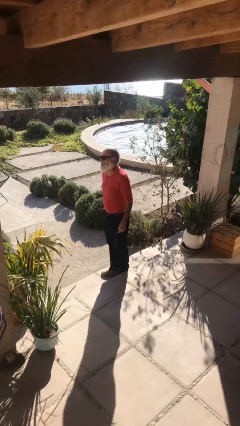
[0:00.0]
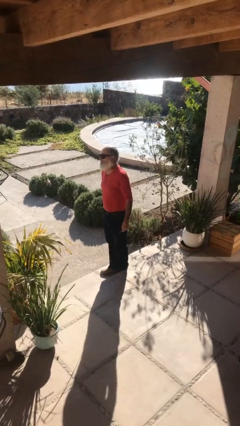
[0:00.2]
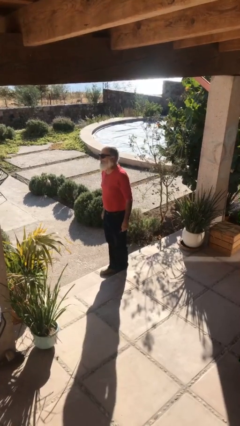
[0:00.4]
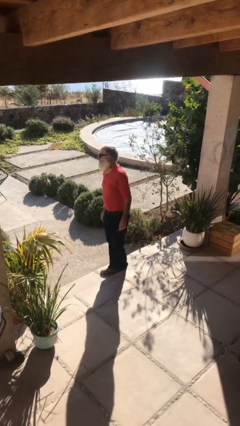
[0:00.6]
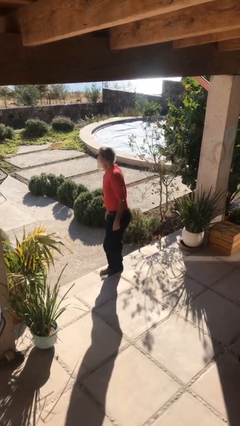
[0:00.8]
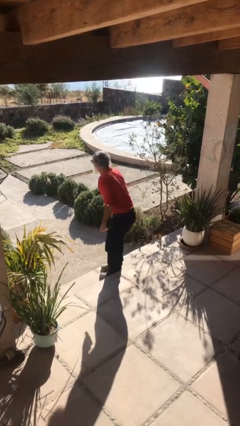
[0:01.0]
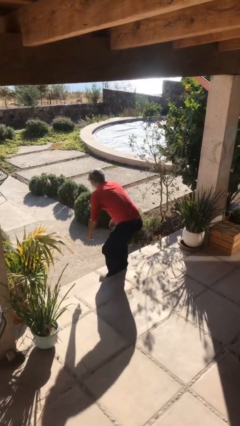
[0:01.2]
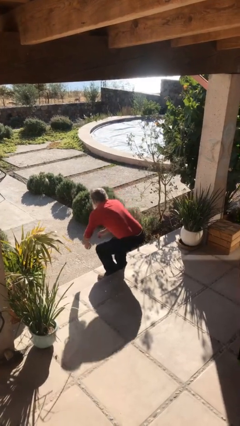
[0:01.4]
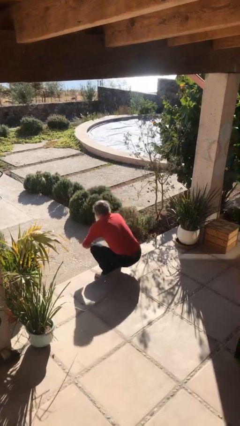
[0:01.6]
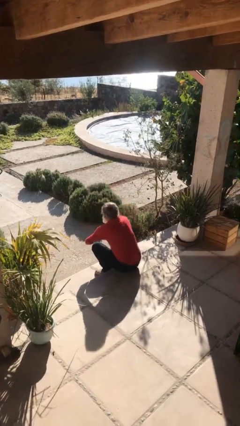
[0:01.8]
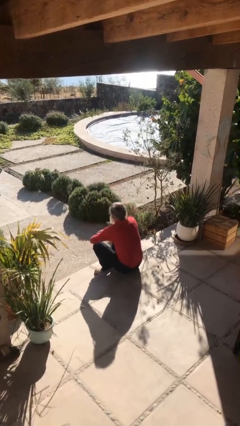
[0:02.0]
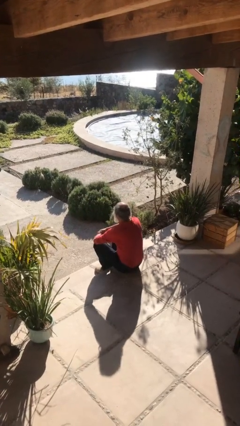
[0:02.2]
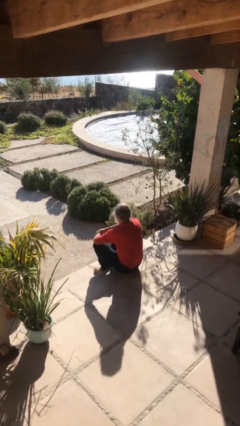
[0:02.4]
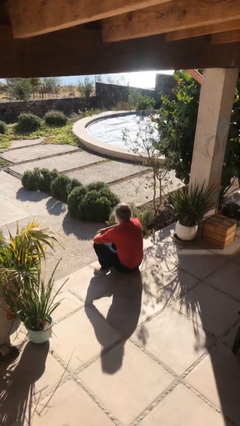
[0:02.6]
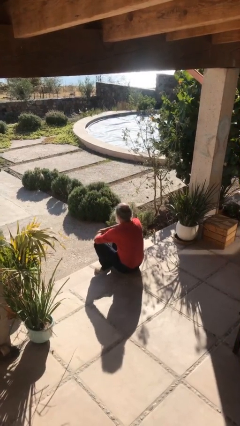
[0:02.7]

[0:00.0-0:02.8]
person sits down

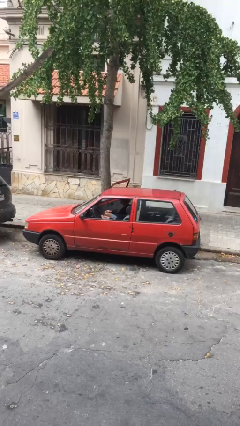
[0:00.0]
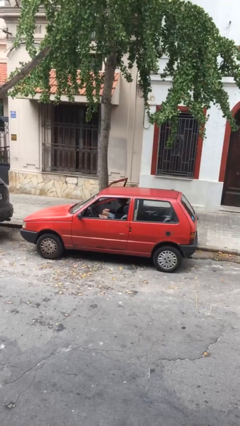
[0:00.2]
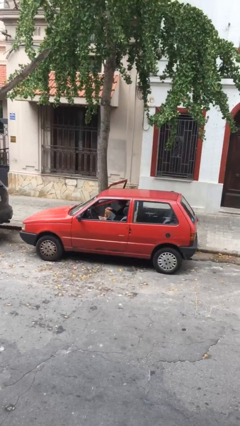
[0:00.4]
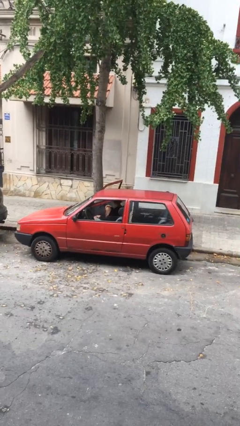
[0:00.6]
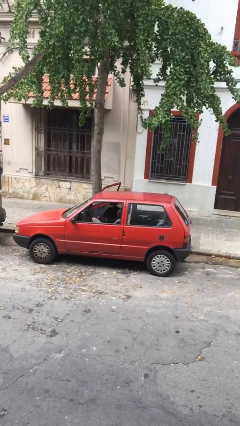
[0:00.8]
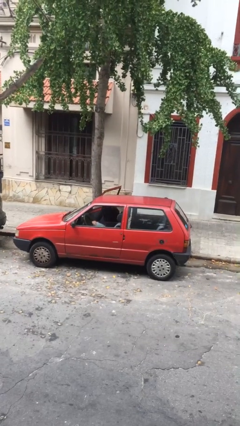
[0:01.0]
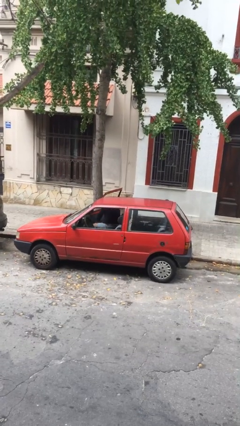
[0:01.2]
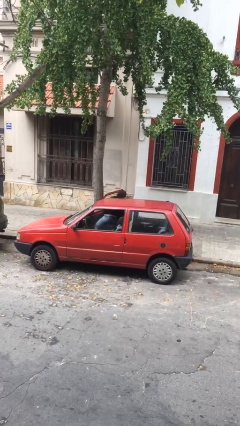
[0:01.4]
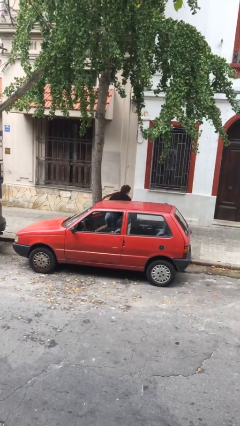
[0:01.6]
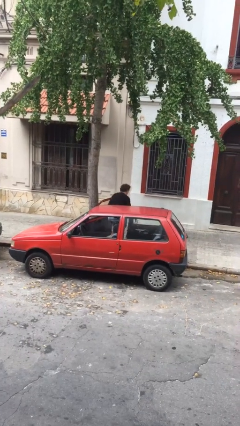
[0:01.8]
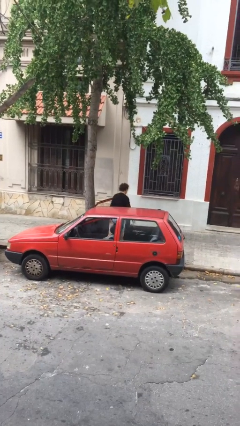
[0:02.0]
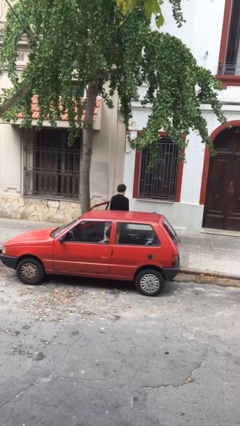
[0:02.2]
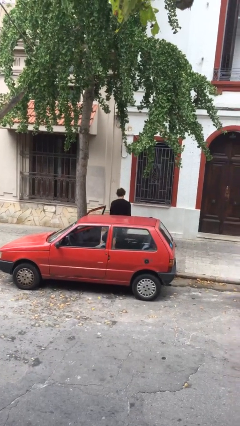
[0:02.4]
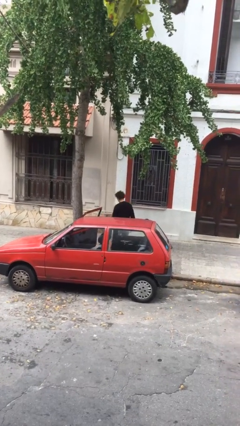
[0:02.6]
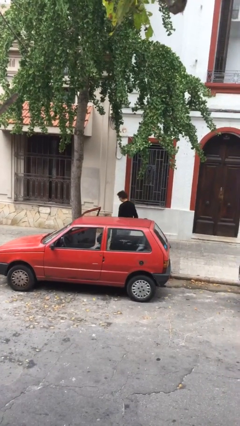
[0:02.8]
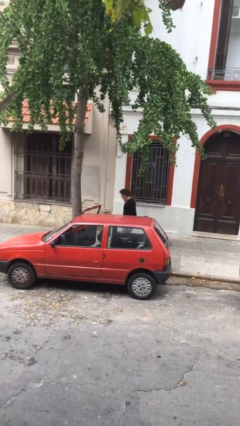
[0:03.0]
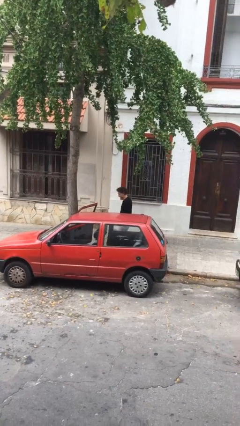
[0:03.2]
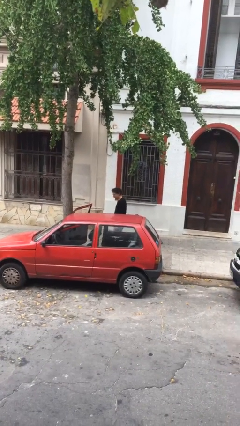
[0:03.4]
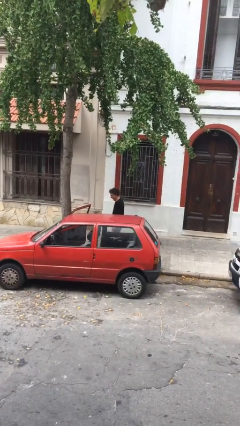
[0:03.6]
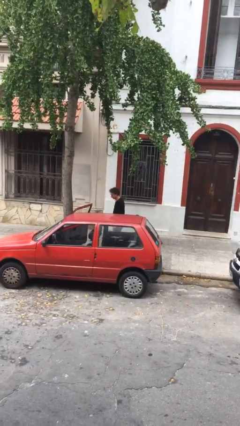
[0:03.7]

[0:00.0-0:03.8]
person exits car

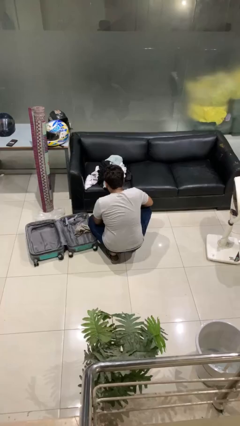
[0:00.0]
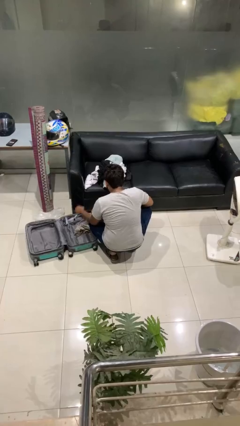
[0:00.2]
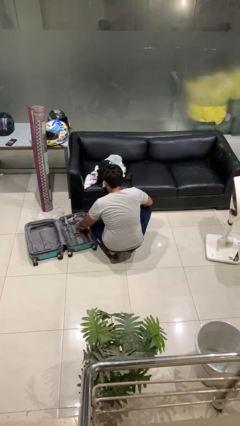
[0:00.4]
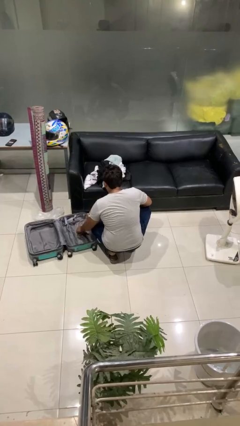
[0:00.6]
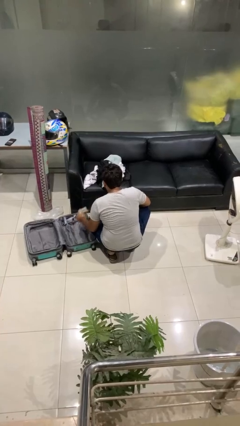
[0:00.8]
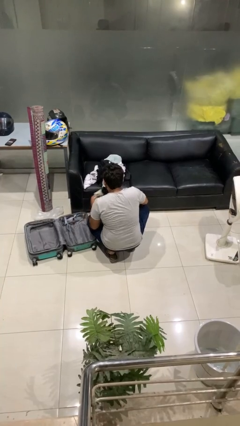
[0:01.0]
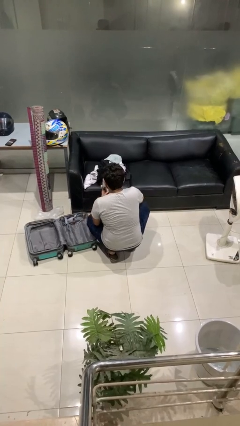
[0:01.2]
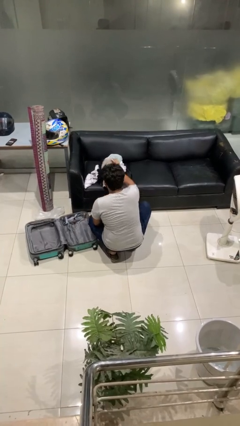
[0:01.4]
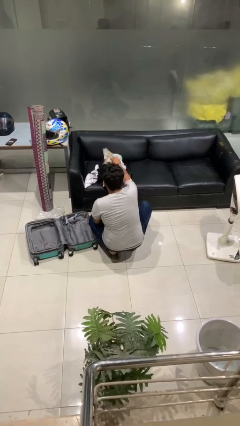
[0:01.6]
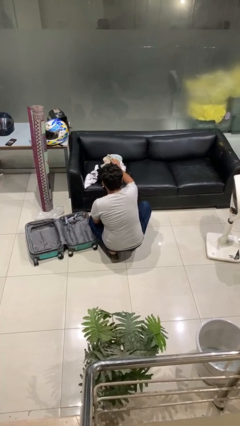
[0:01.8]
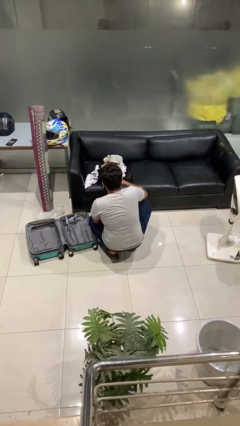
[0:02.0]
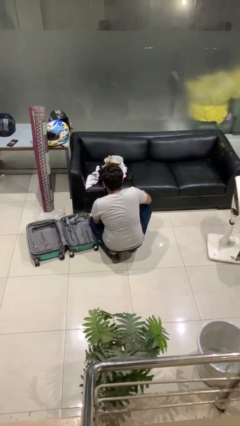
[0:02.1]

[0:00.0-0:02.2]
person unloads clothes from suitcase

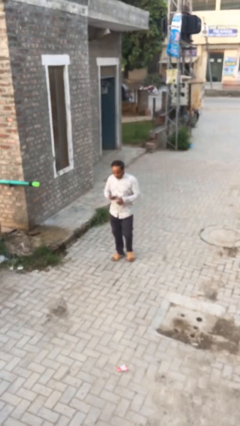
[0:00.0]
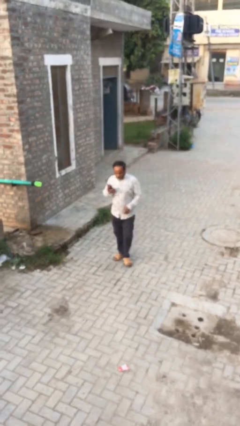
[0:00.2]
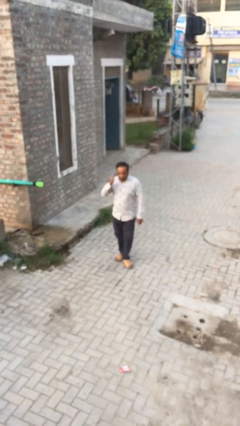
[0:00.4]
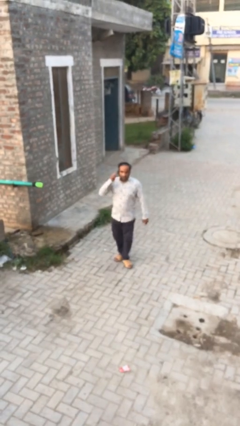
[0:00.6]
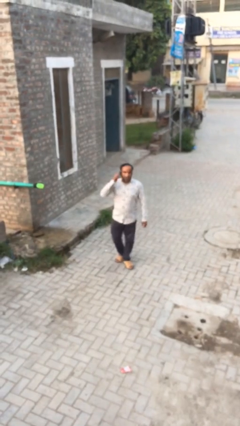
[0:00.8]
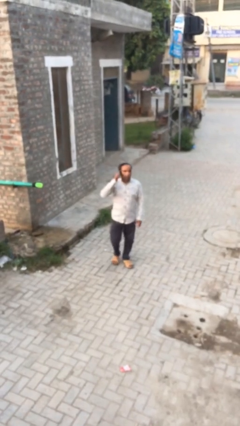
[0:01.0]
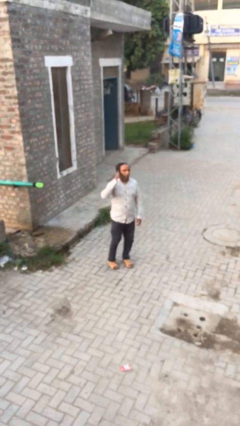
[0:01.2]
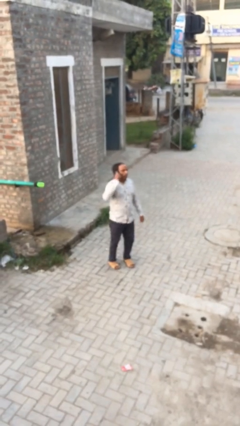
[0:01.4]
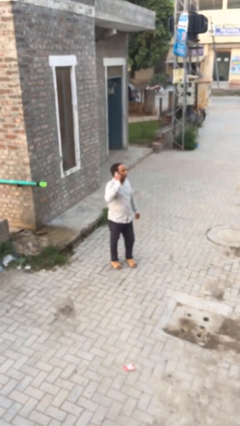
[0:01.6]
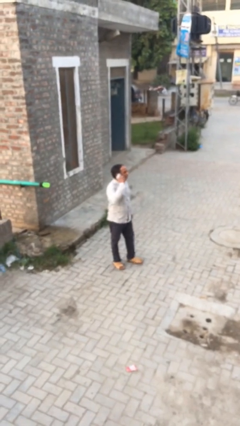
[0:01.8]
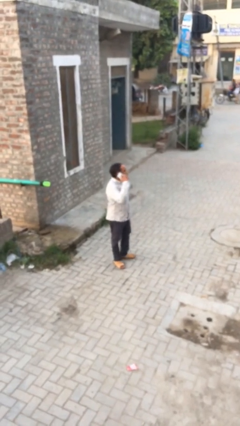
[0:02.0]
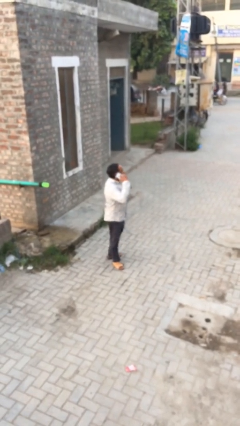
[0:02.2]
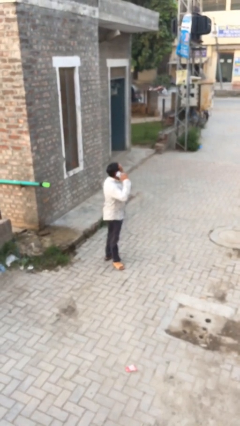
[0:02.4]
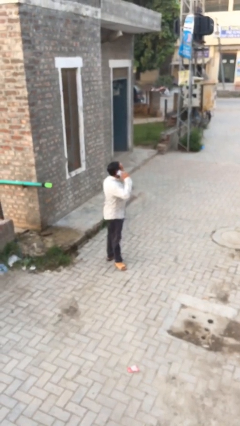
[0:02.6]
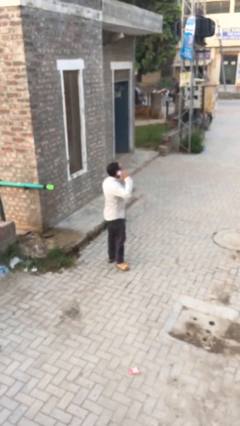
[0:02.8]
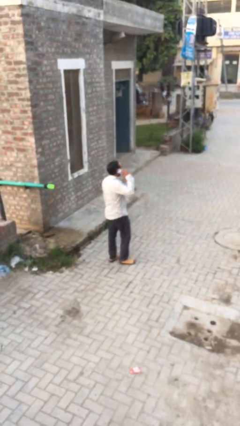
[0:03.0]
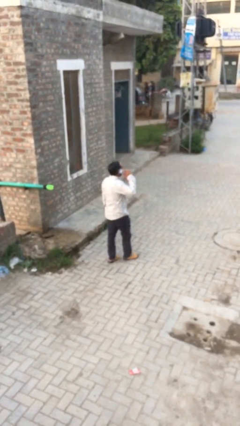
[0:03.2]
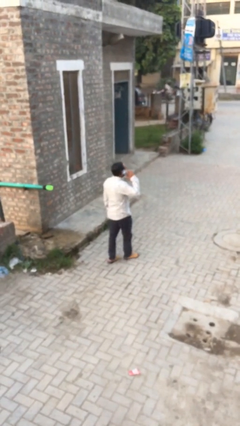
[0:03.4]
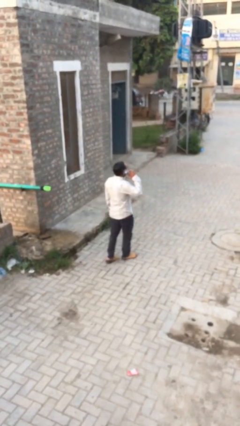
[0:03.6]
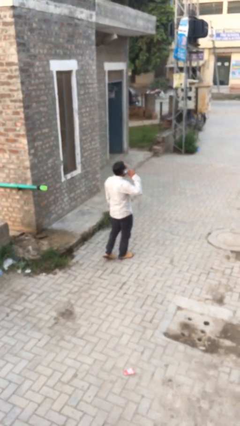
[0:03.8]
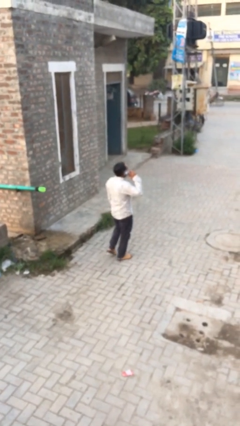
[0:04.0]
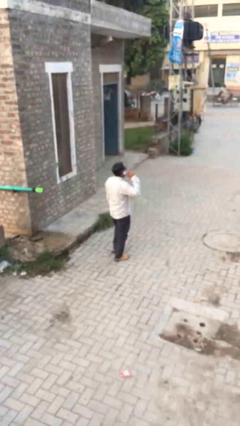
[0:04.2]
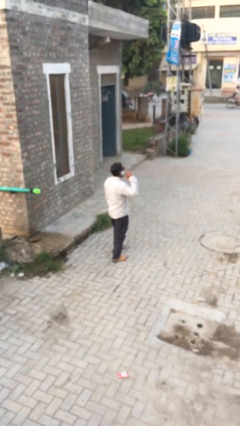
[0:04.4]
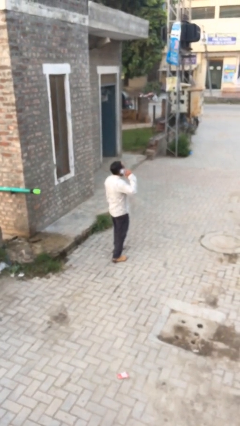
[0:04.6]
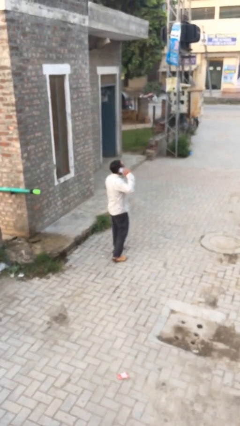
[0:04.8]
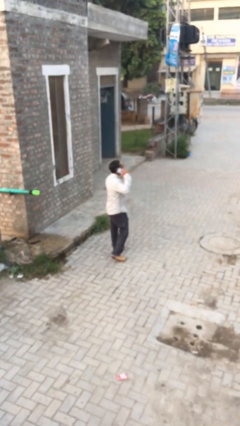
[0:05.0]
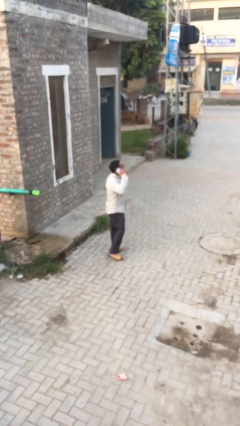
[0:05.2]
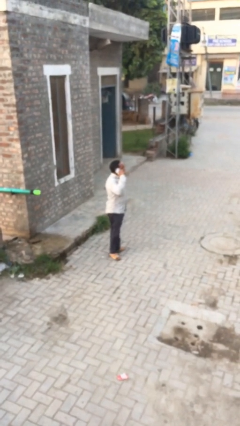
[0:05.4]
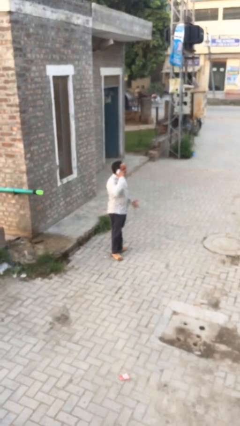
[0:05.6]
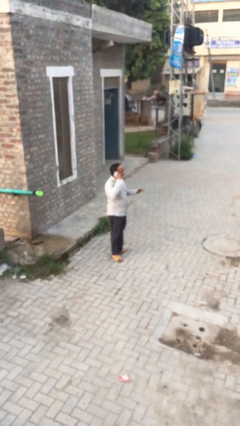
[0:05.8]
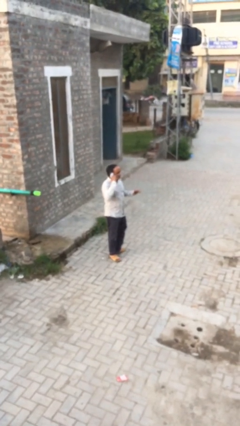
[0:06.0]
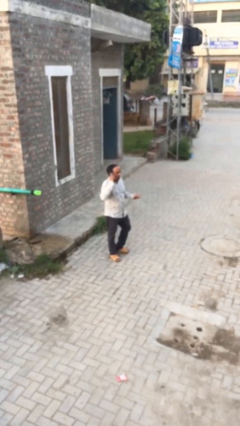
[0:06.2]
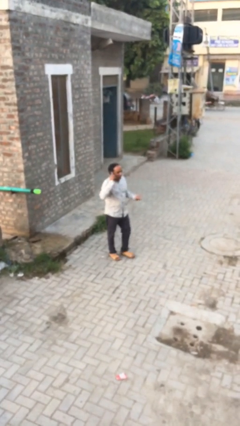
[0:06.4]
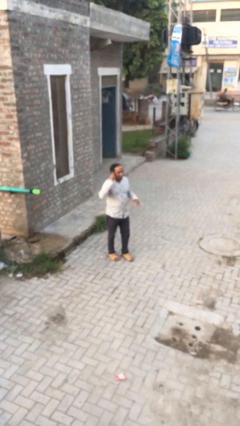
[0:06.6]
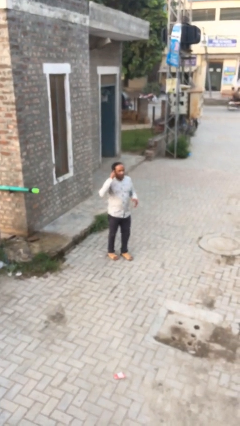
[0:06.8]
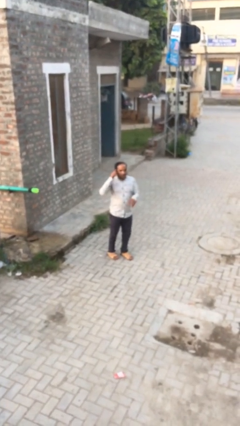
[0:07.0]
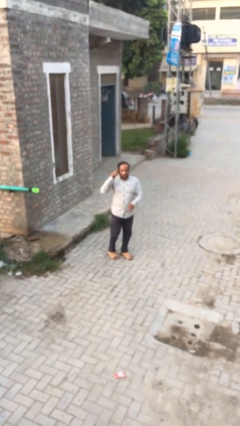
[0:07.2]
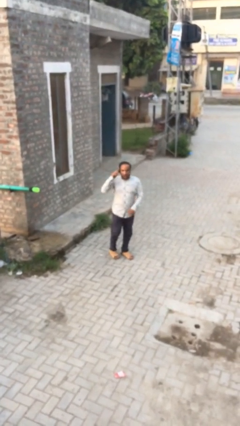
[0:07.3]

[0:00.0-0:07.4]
person talks on phone

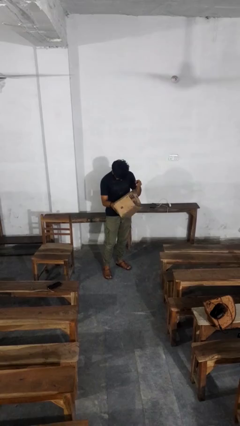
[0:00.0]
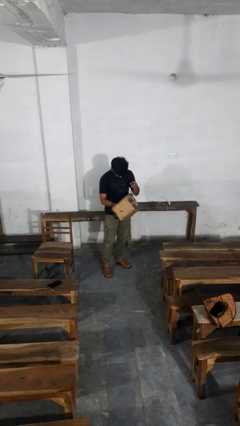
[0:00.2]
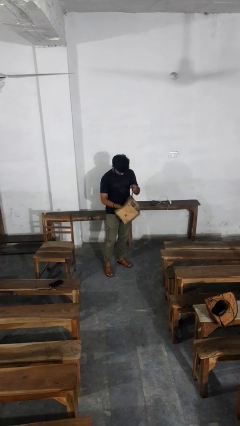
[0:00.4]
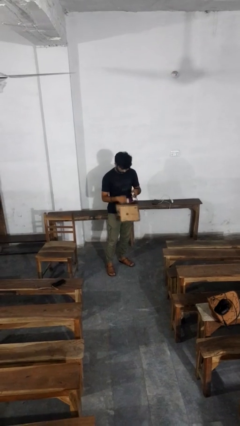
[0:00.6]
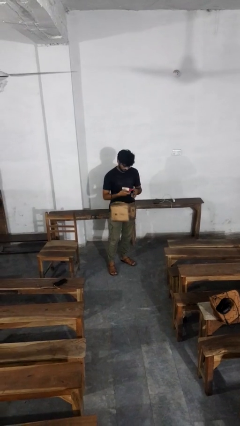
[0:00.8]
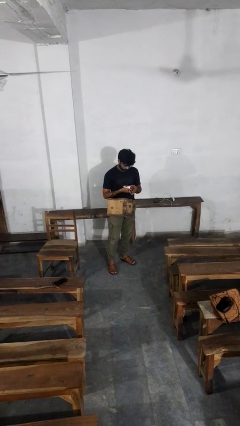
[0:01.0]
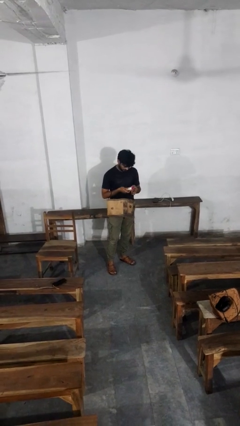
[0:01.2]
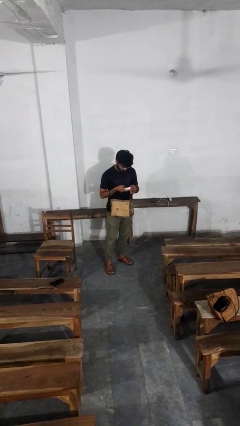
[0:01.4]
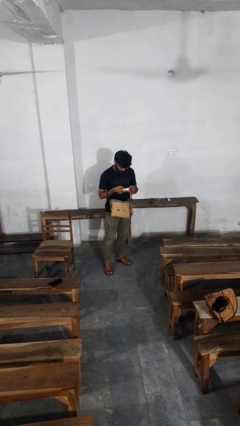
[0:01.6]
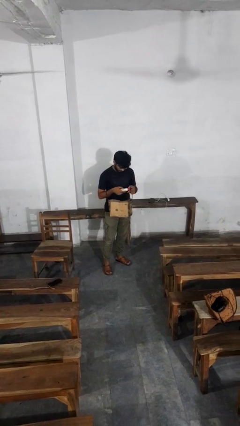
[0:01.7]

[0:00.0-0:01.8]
person takes object from purse
